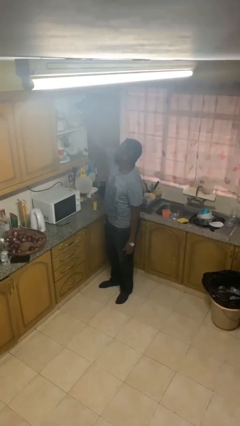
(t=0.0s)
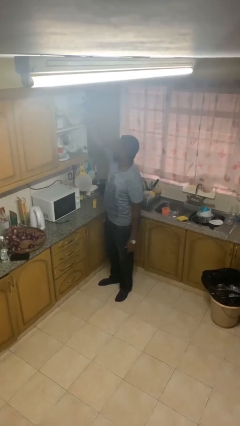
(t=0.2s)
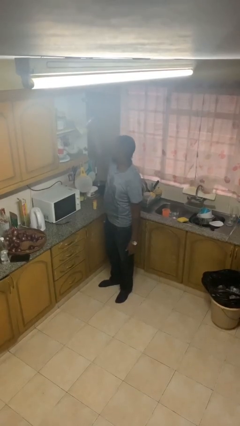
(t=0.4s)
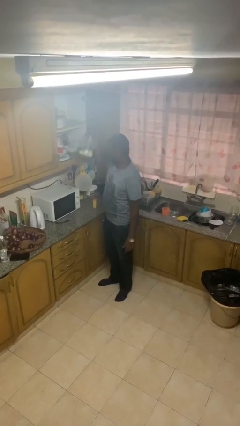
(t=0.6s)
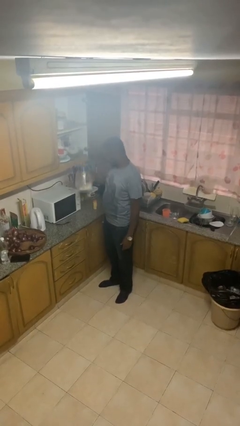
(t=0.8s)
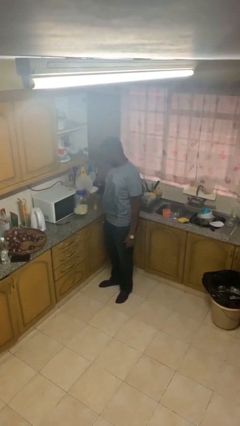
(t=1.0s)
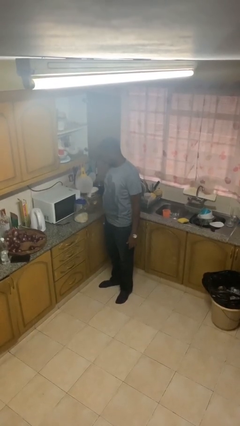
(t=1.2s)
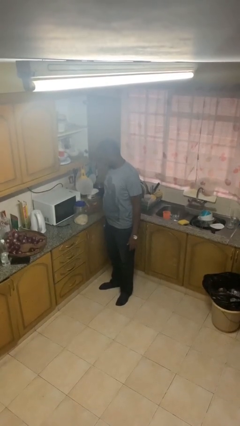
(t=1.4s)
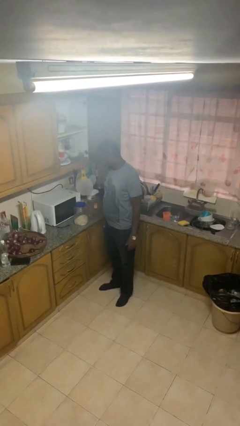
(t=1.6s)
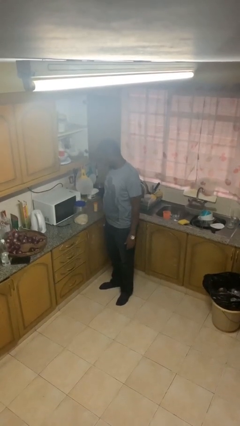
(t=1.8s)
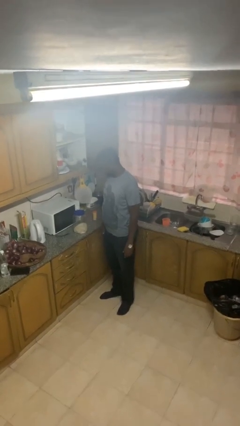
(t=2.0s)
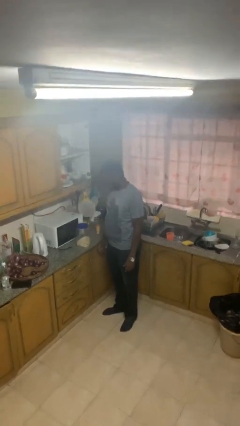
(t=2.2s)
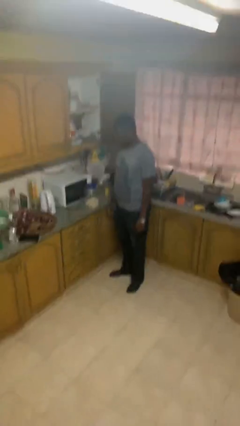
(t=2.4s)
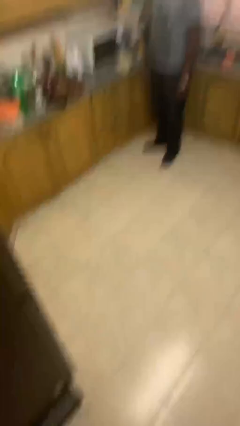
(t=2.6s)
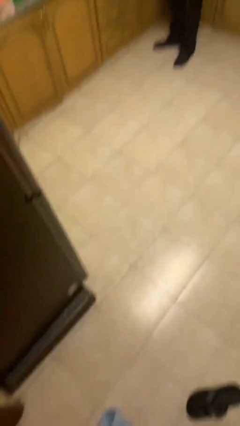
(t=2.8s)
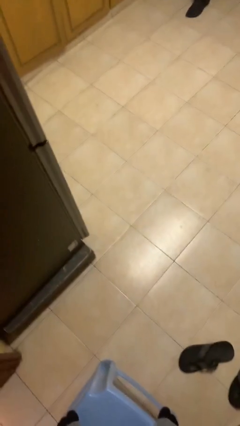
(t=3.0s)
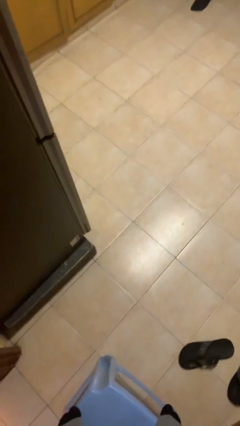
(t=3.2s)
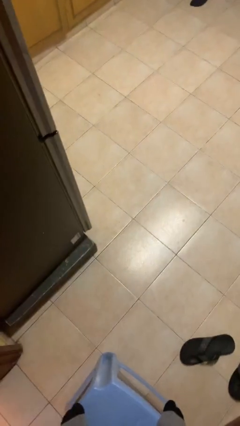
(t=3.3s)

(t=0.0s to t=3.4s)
person puts down object on table

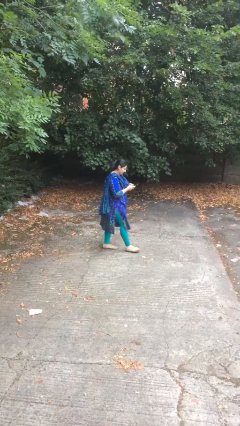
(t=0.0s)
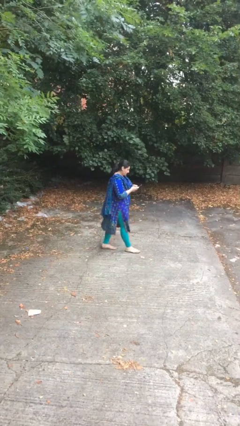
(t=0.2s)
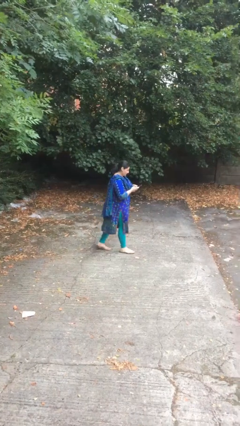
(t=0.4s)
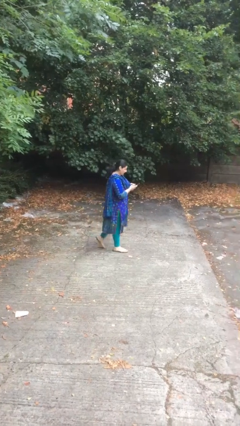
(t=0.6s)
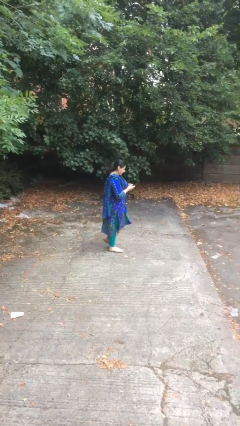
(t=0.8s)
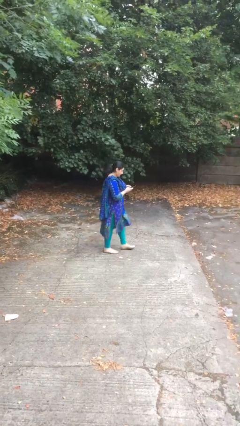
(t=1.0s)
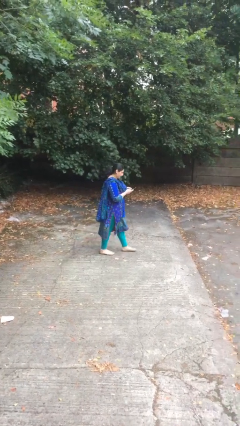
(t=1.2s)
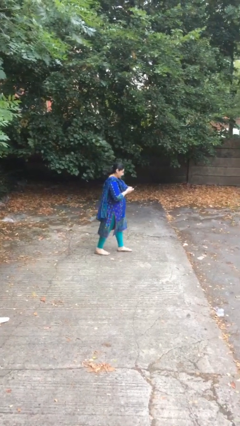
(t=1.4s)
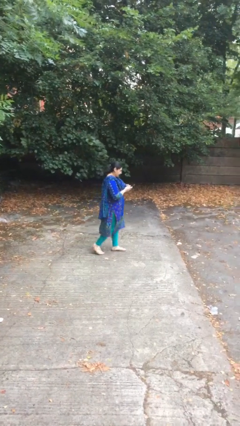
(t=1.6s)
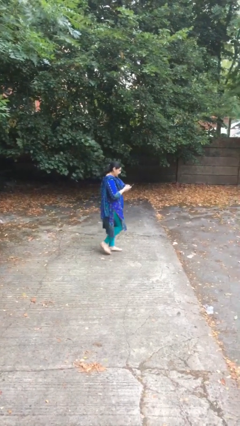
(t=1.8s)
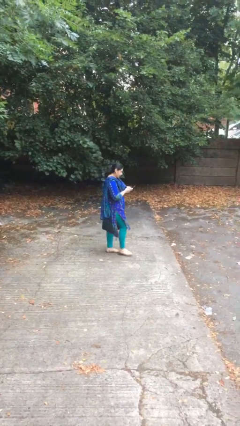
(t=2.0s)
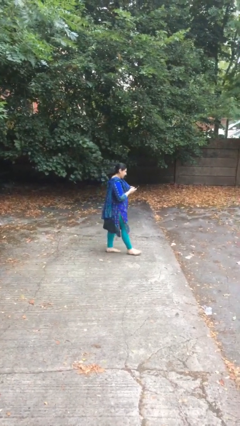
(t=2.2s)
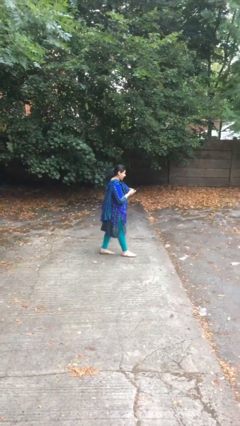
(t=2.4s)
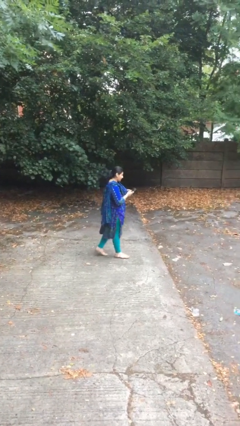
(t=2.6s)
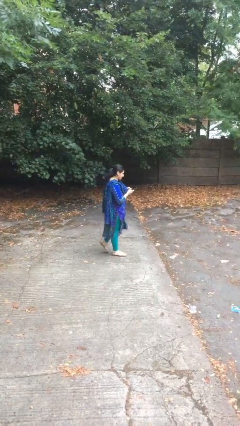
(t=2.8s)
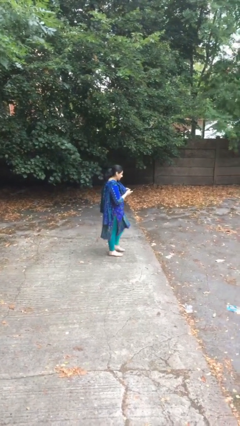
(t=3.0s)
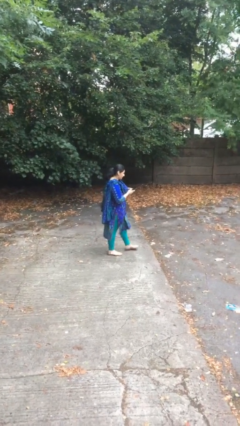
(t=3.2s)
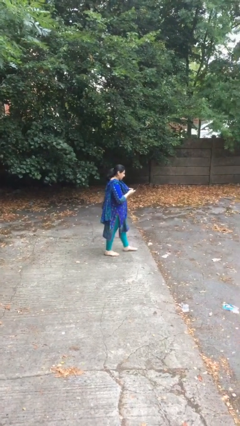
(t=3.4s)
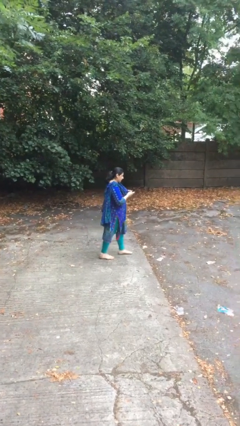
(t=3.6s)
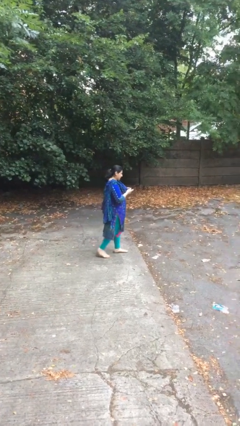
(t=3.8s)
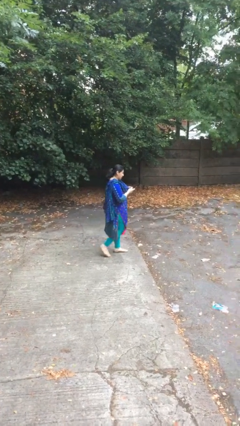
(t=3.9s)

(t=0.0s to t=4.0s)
person texts on phone

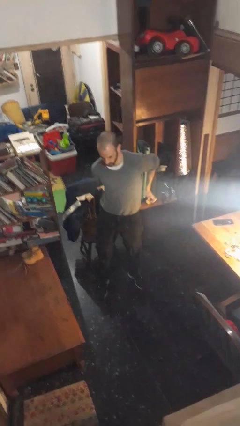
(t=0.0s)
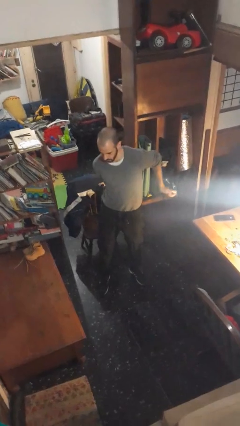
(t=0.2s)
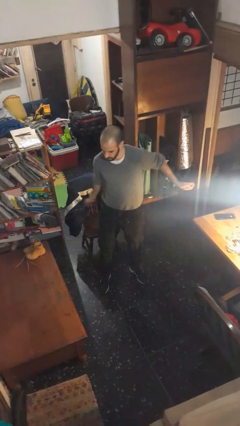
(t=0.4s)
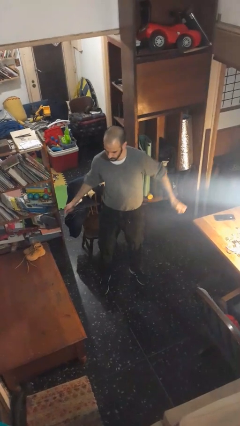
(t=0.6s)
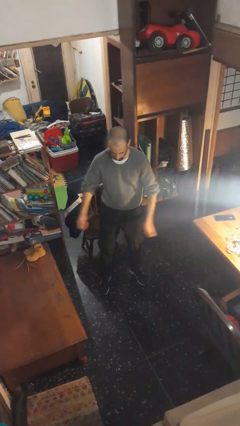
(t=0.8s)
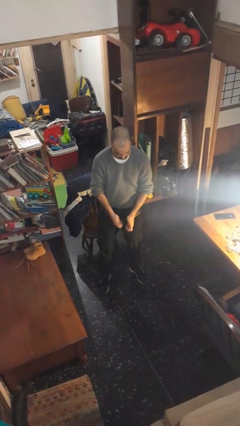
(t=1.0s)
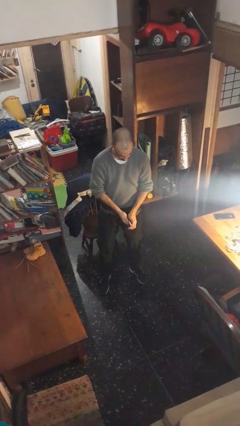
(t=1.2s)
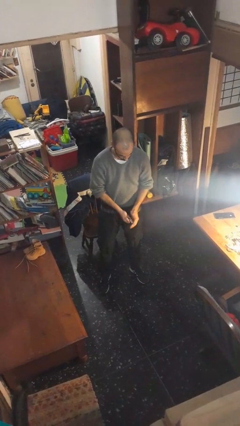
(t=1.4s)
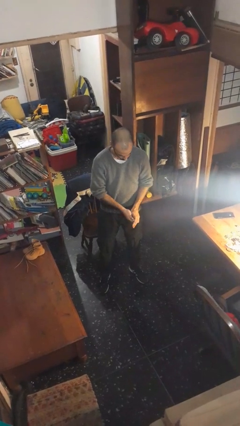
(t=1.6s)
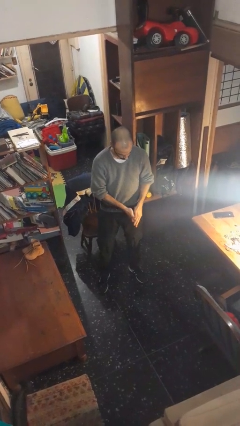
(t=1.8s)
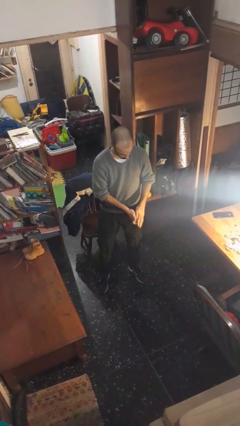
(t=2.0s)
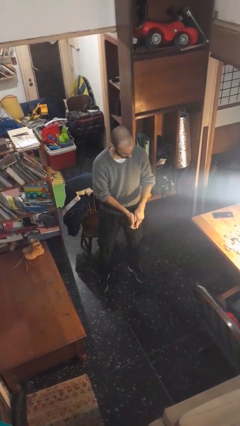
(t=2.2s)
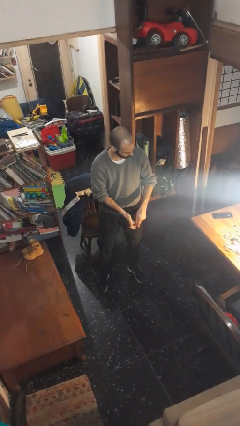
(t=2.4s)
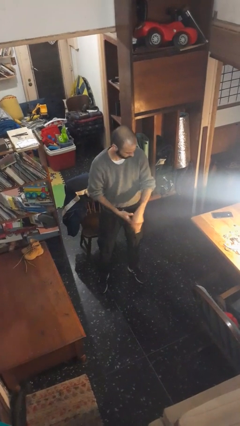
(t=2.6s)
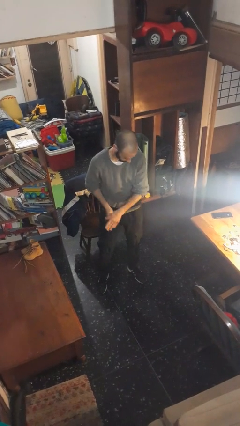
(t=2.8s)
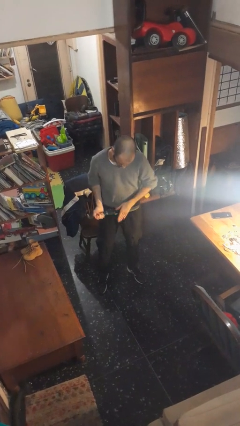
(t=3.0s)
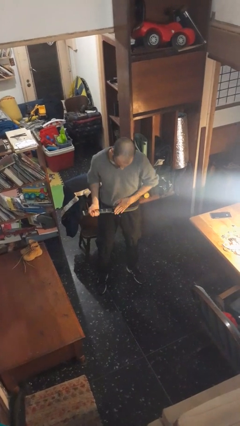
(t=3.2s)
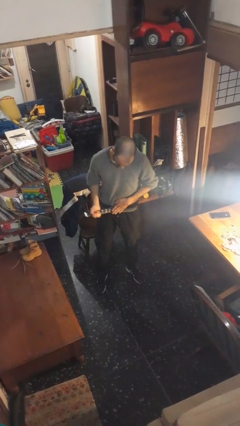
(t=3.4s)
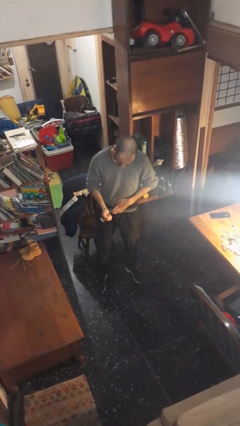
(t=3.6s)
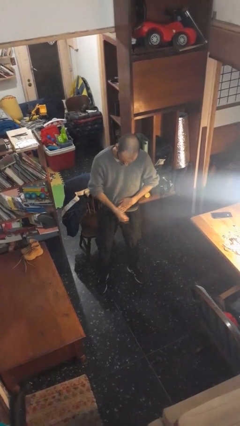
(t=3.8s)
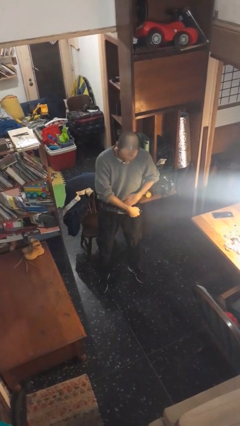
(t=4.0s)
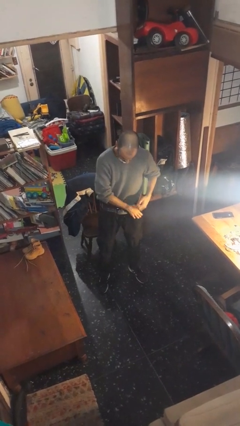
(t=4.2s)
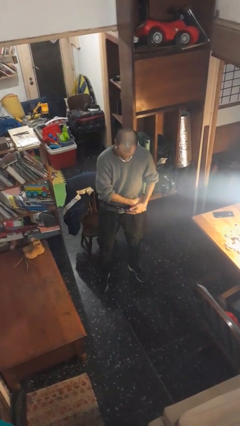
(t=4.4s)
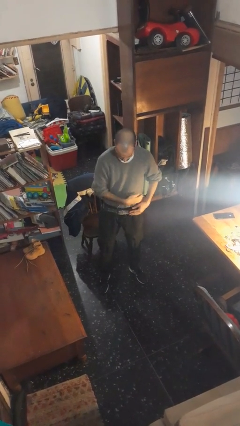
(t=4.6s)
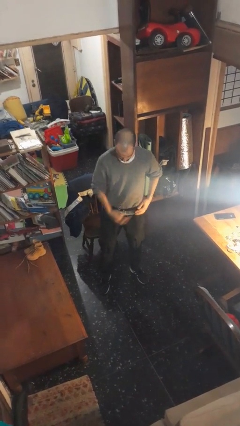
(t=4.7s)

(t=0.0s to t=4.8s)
person puts on belt

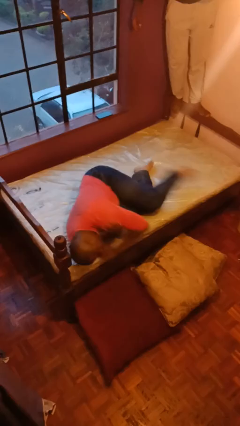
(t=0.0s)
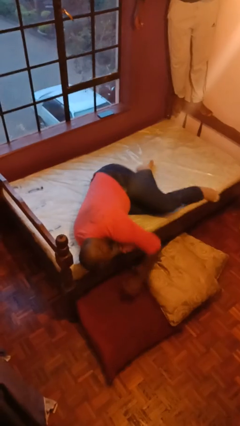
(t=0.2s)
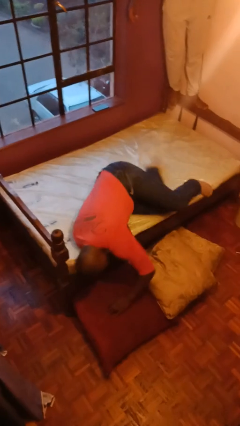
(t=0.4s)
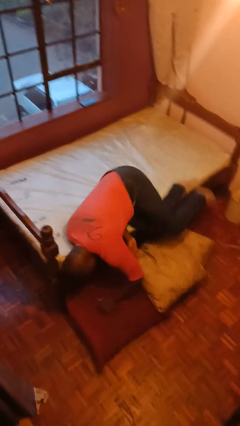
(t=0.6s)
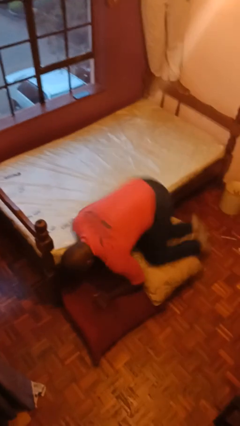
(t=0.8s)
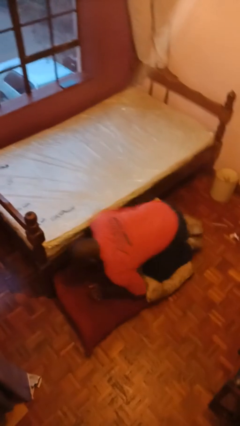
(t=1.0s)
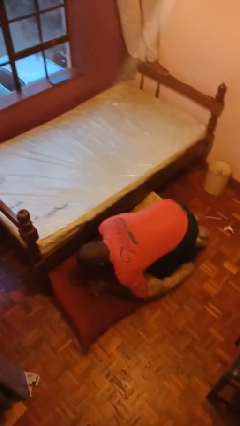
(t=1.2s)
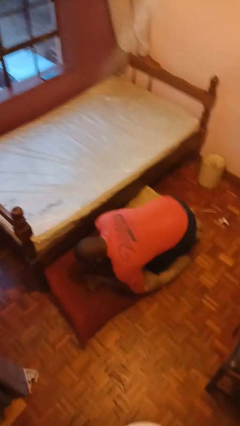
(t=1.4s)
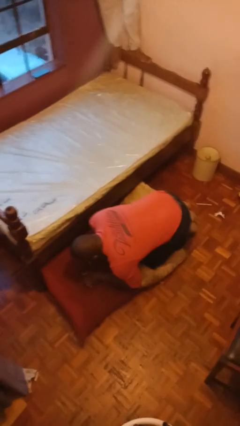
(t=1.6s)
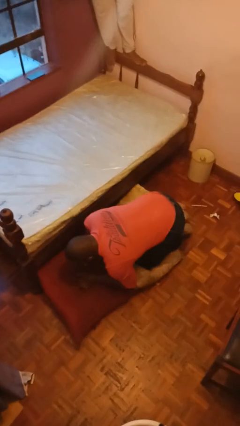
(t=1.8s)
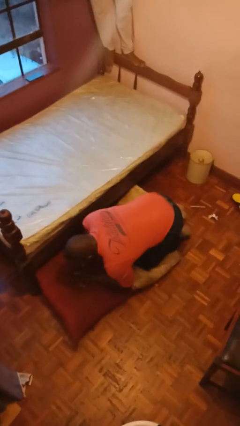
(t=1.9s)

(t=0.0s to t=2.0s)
person falls from bed

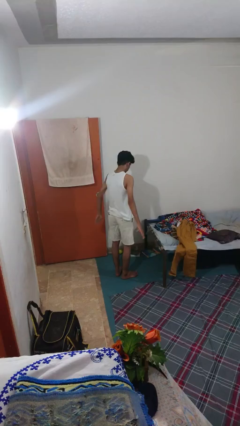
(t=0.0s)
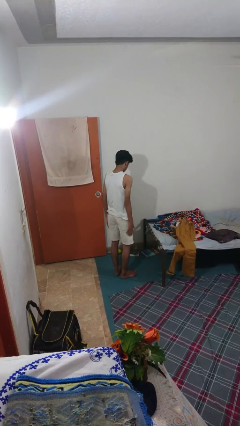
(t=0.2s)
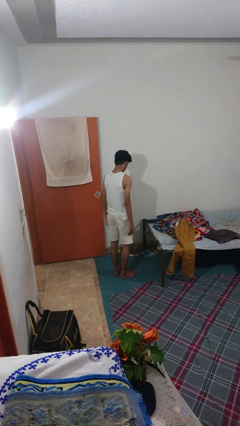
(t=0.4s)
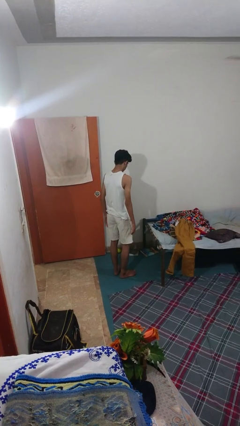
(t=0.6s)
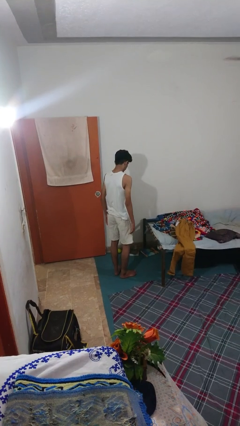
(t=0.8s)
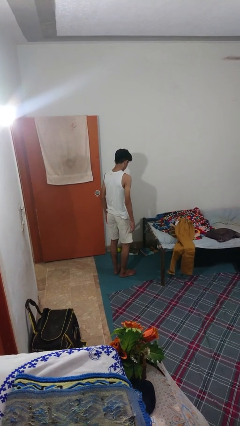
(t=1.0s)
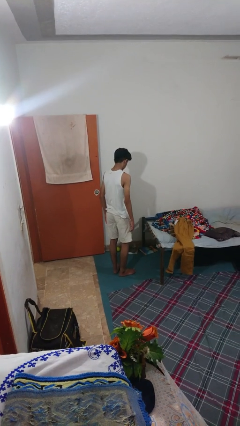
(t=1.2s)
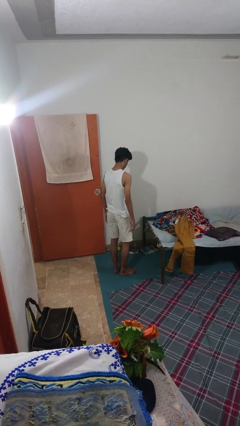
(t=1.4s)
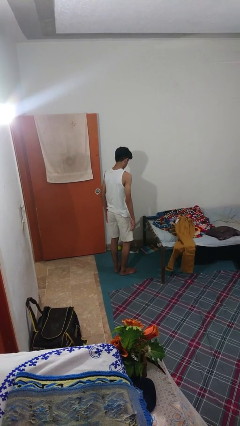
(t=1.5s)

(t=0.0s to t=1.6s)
person puts hands in back pockets

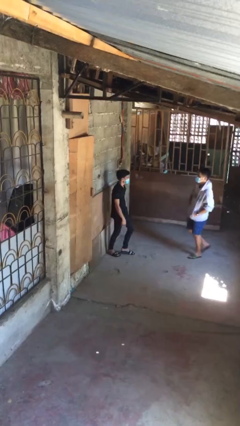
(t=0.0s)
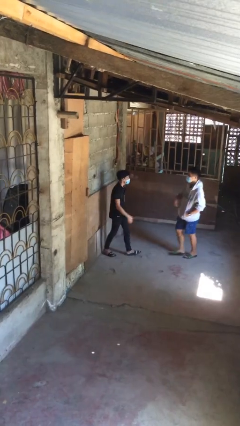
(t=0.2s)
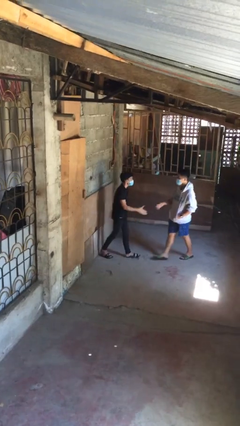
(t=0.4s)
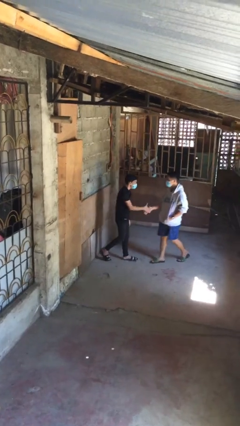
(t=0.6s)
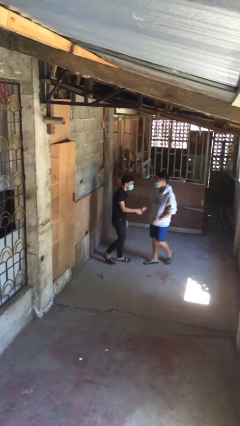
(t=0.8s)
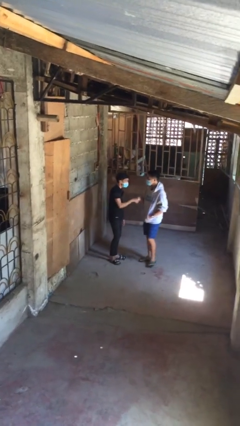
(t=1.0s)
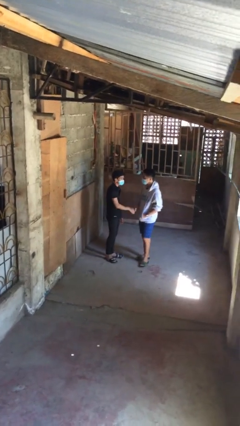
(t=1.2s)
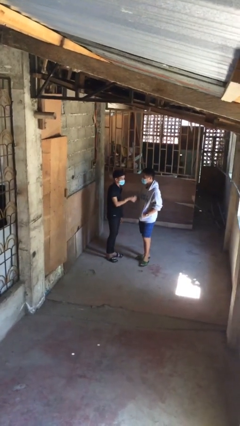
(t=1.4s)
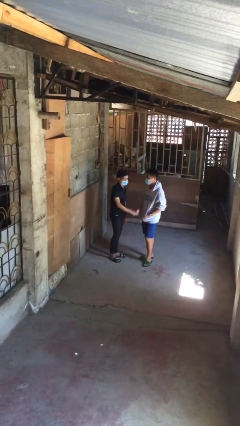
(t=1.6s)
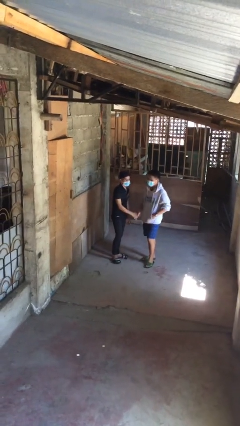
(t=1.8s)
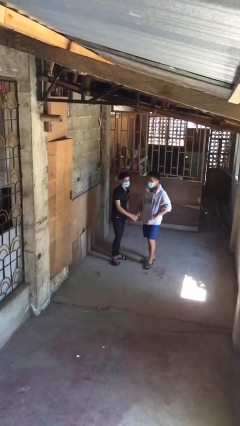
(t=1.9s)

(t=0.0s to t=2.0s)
person shakes hand
